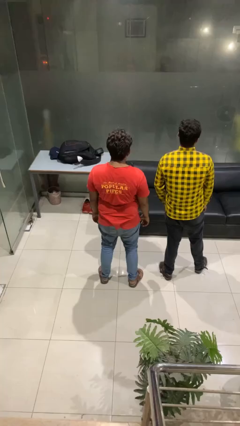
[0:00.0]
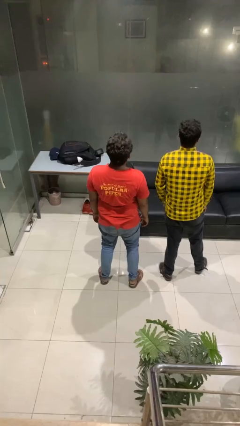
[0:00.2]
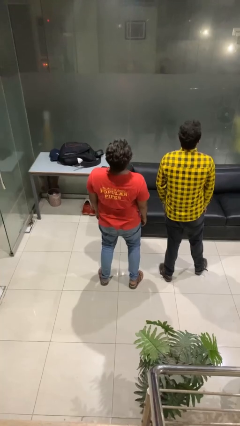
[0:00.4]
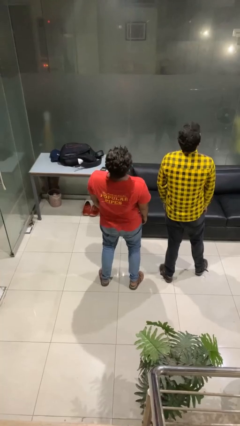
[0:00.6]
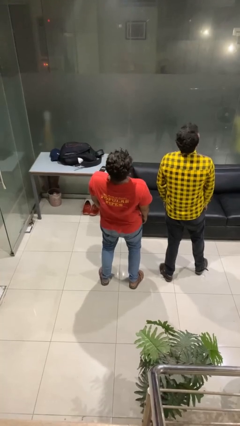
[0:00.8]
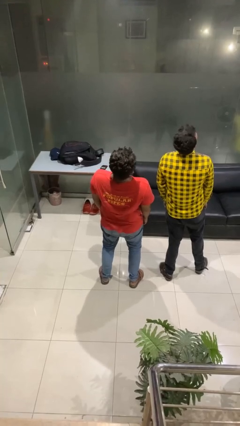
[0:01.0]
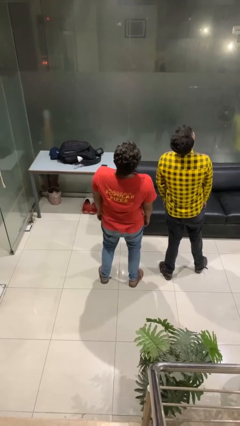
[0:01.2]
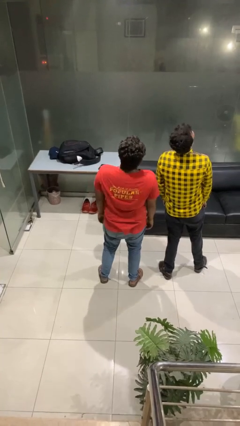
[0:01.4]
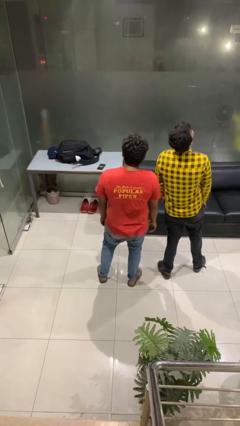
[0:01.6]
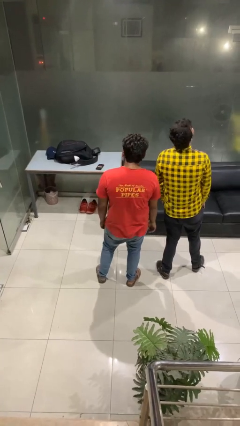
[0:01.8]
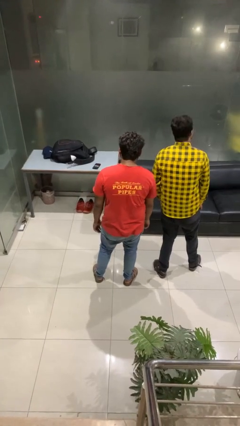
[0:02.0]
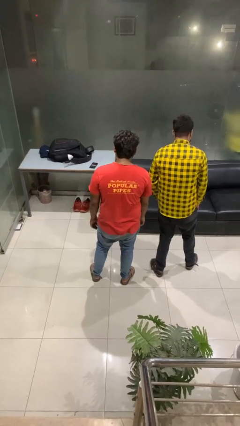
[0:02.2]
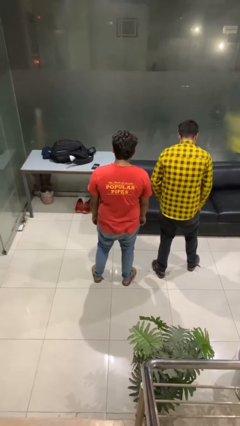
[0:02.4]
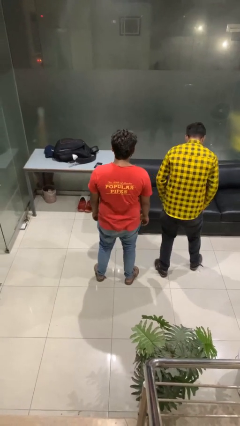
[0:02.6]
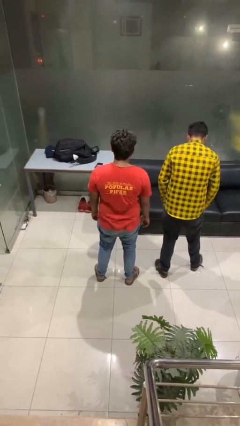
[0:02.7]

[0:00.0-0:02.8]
person laughs with person

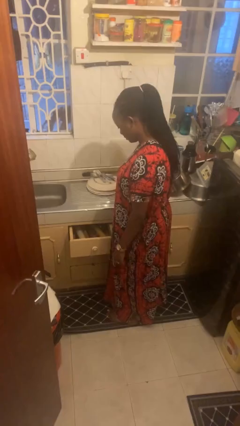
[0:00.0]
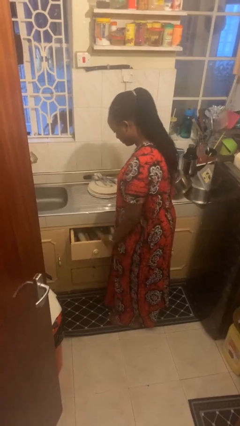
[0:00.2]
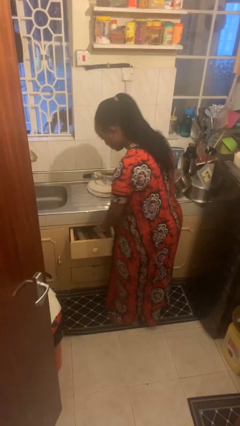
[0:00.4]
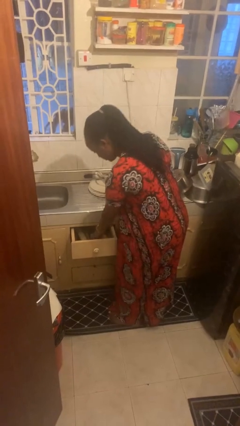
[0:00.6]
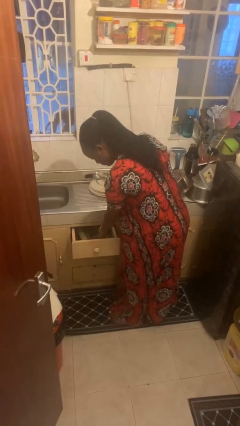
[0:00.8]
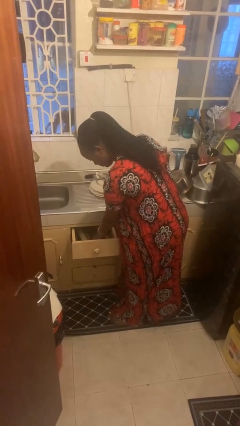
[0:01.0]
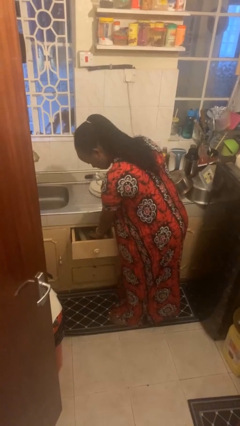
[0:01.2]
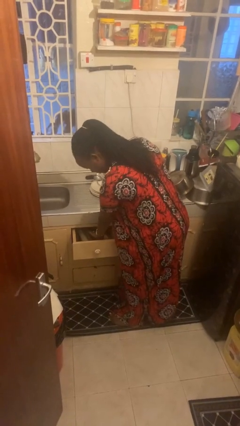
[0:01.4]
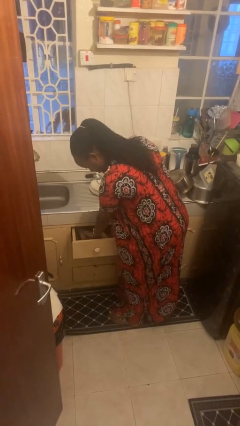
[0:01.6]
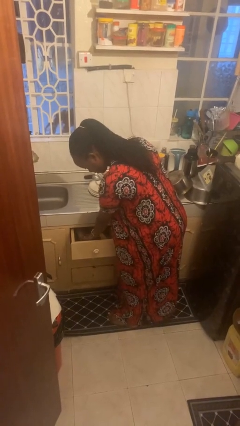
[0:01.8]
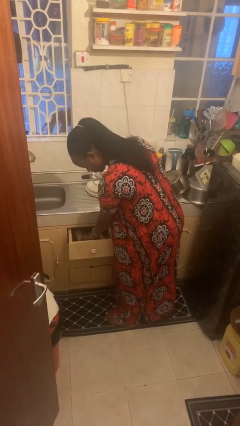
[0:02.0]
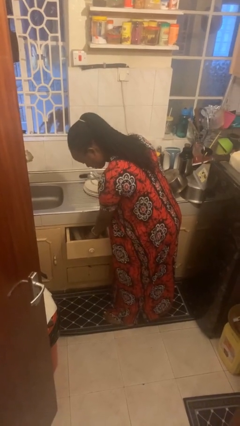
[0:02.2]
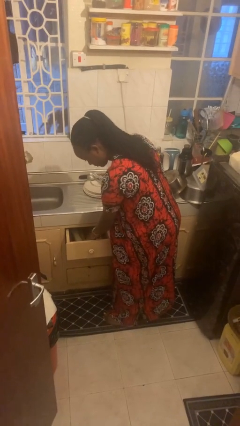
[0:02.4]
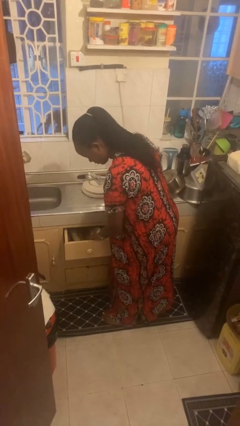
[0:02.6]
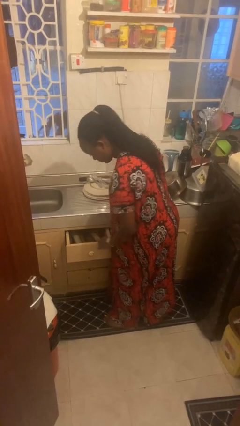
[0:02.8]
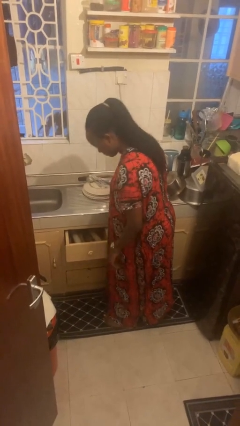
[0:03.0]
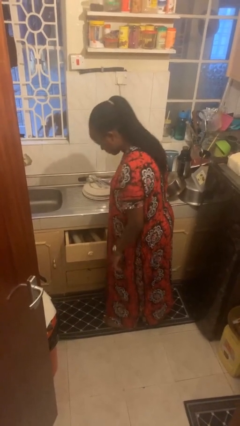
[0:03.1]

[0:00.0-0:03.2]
person searches in kitchen drawer

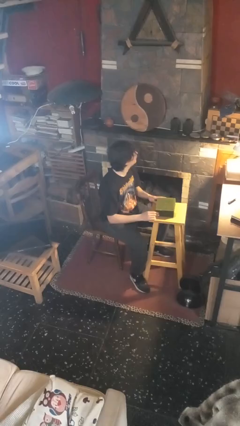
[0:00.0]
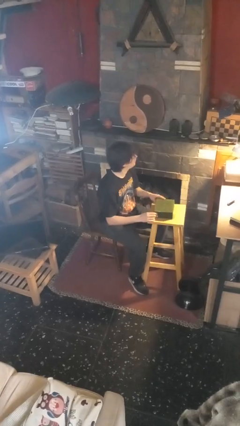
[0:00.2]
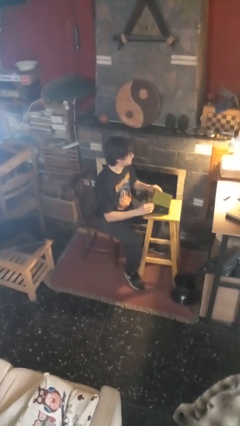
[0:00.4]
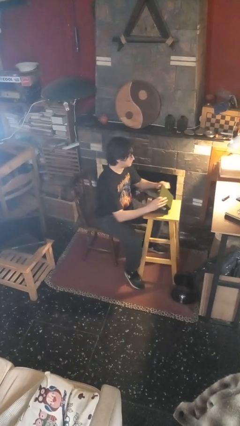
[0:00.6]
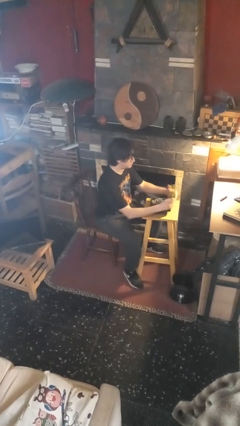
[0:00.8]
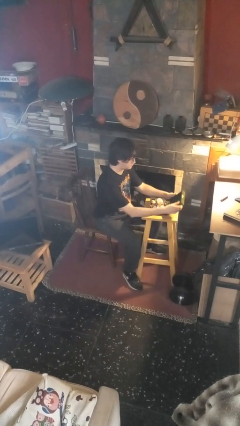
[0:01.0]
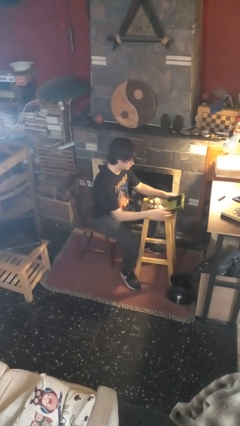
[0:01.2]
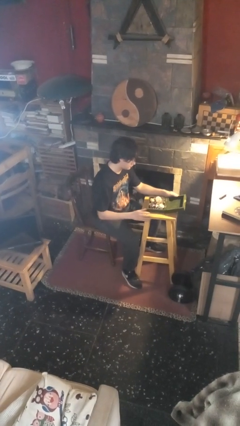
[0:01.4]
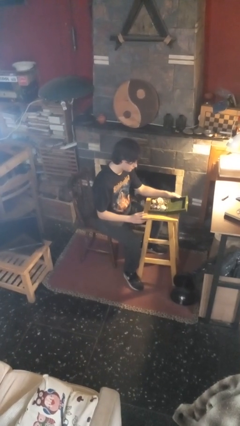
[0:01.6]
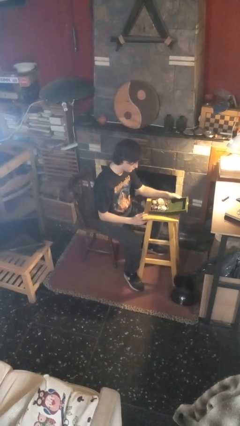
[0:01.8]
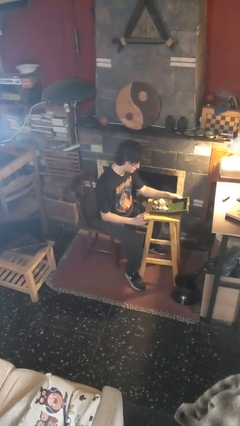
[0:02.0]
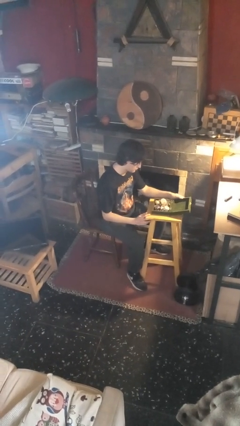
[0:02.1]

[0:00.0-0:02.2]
person opens jewelry box

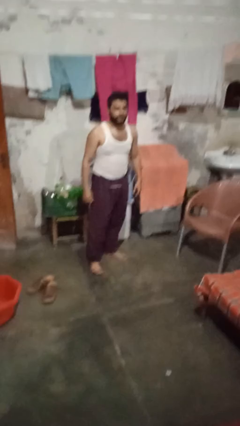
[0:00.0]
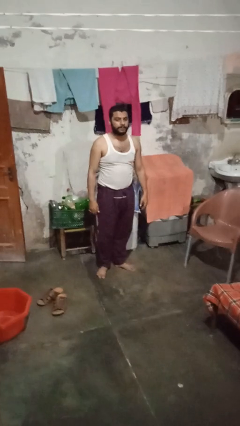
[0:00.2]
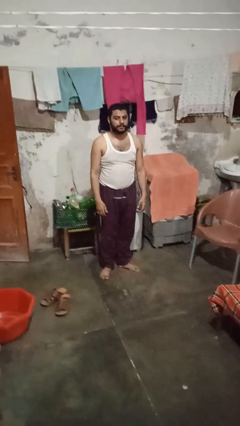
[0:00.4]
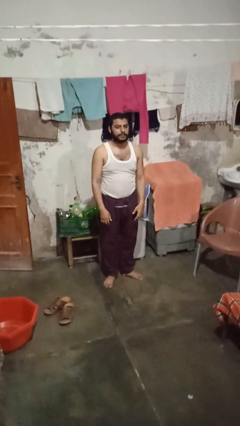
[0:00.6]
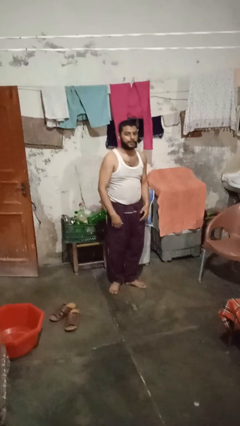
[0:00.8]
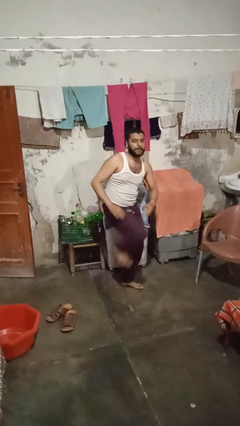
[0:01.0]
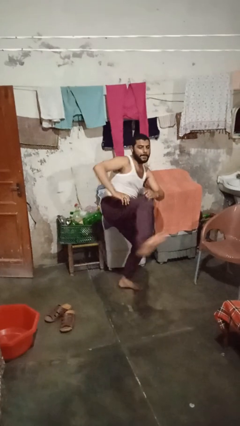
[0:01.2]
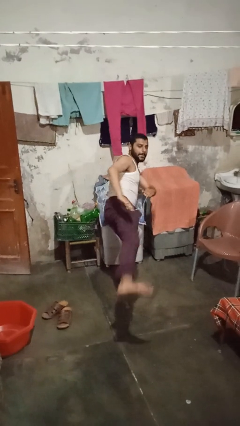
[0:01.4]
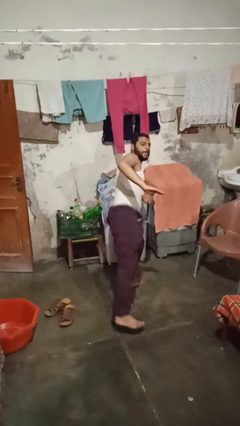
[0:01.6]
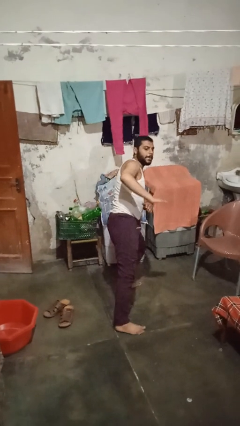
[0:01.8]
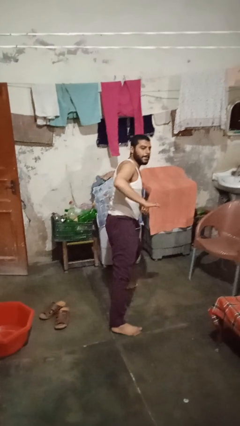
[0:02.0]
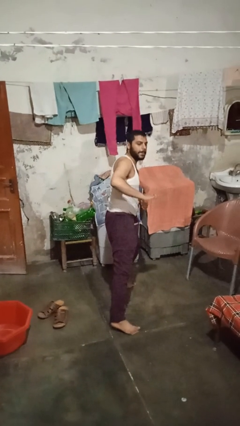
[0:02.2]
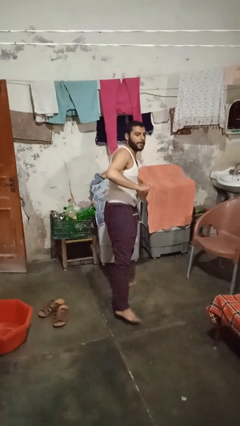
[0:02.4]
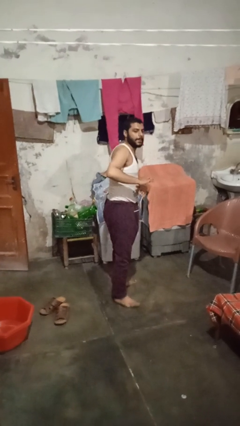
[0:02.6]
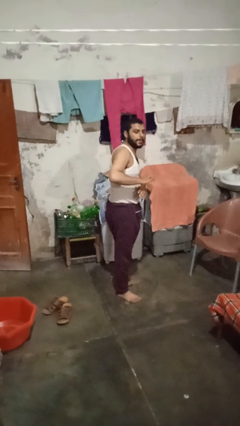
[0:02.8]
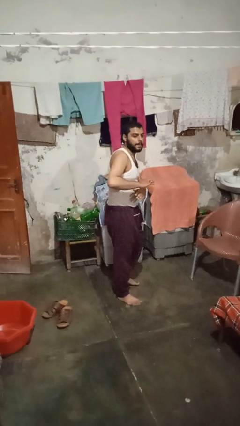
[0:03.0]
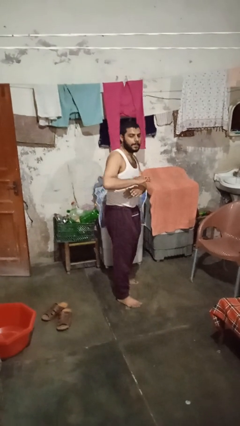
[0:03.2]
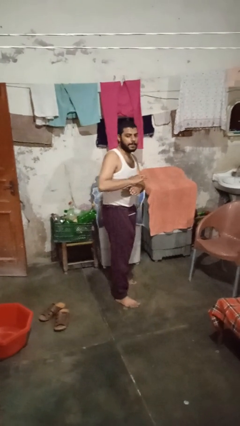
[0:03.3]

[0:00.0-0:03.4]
person karate kicks

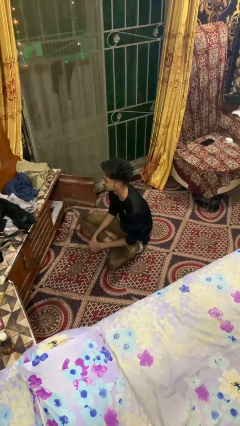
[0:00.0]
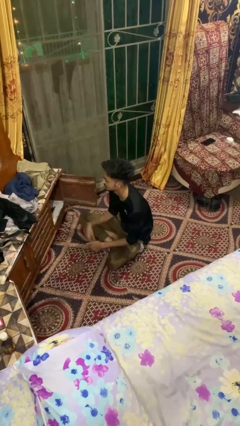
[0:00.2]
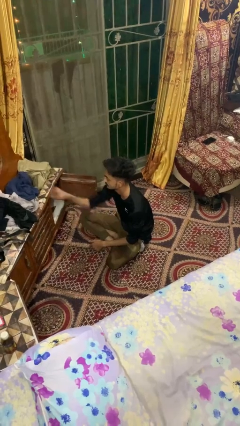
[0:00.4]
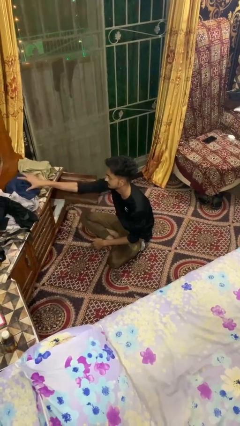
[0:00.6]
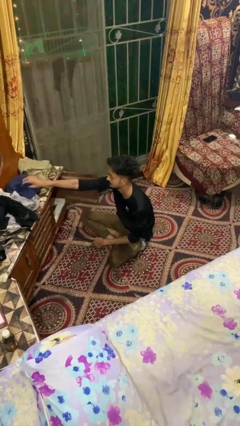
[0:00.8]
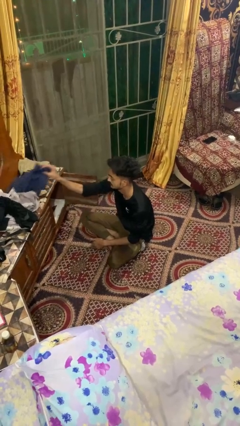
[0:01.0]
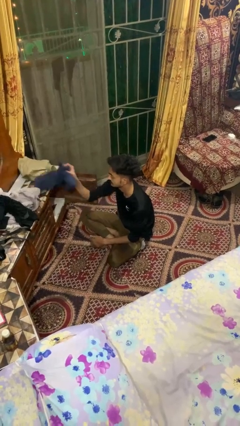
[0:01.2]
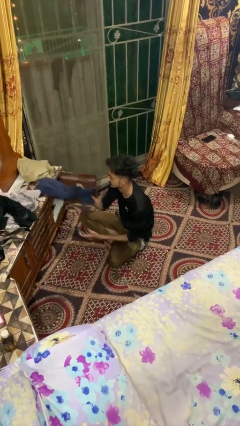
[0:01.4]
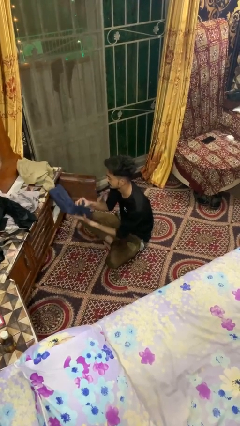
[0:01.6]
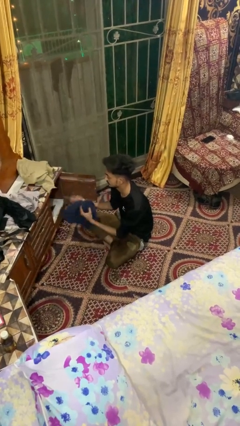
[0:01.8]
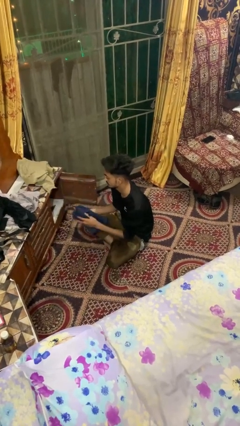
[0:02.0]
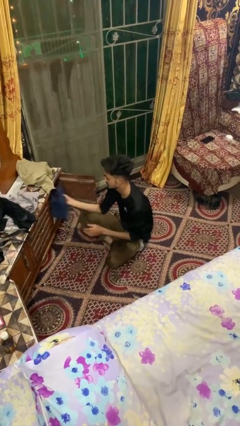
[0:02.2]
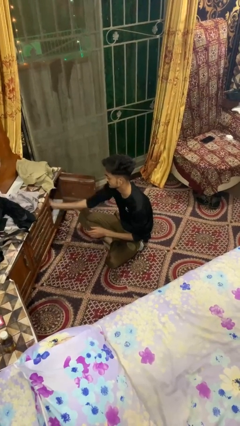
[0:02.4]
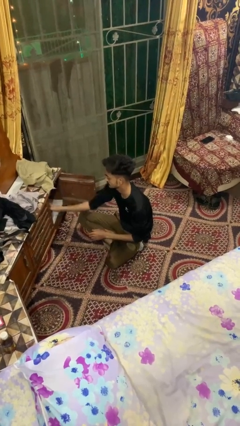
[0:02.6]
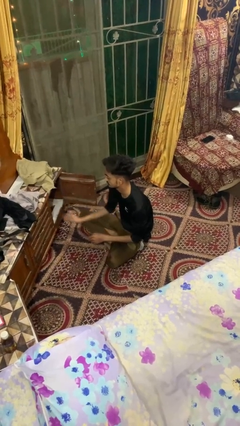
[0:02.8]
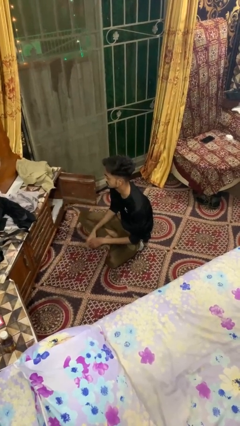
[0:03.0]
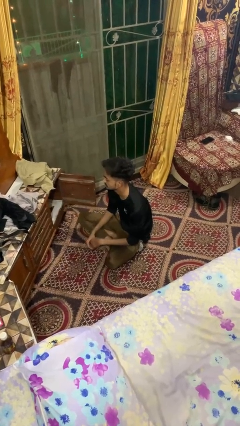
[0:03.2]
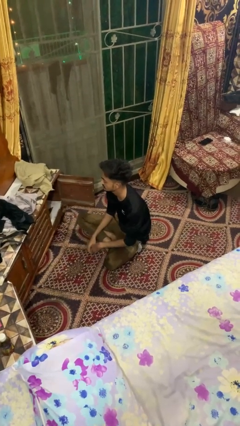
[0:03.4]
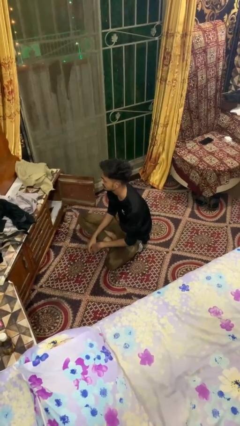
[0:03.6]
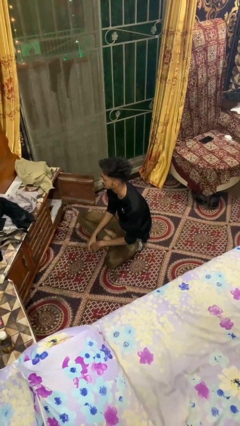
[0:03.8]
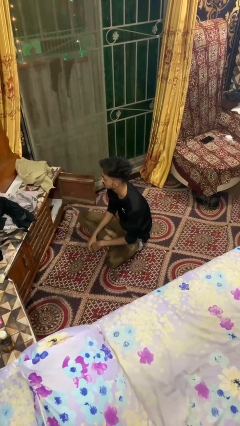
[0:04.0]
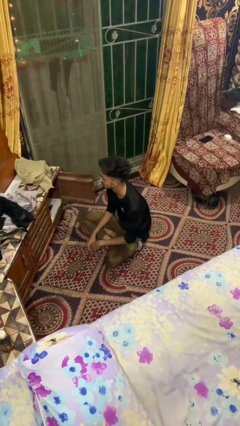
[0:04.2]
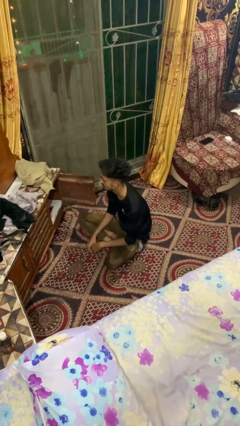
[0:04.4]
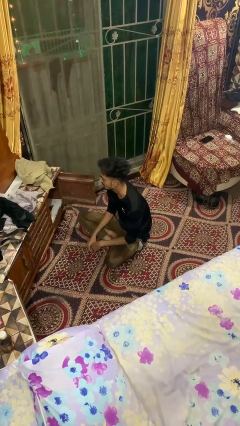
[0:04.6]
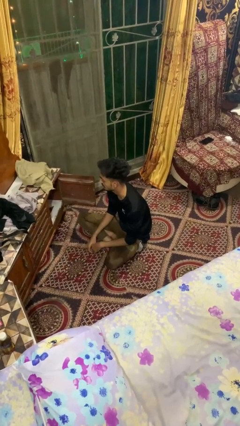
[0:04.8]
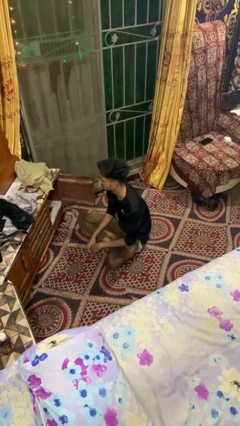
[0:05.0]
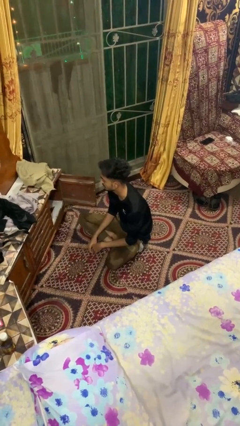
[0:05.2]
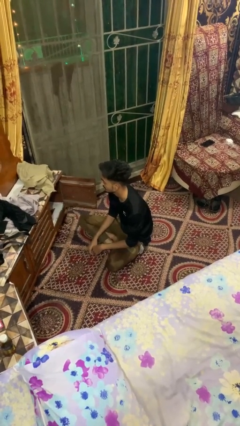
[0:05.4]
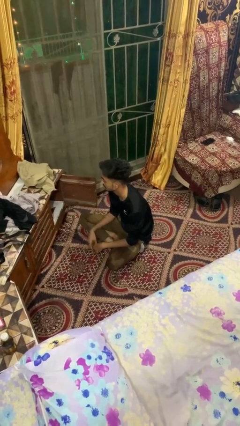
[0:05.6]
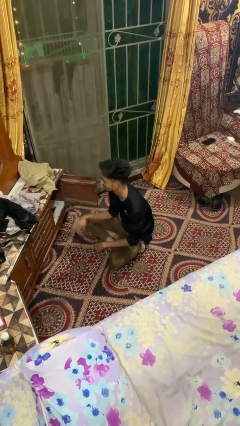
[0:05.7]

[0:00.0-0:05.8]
person puts clothes into dresser
